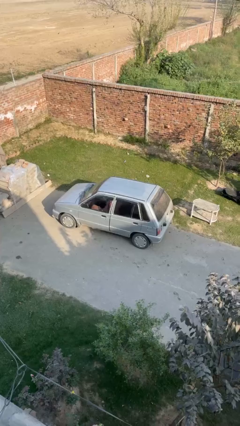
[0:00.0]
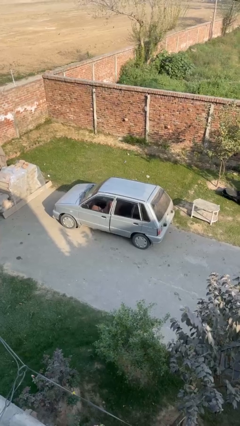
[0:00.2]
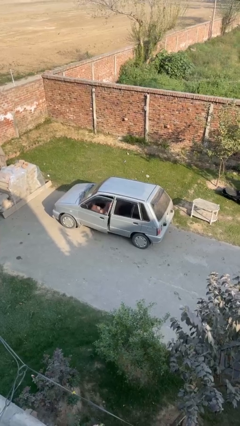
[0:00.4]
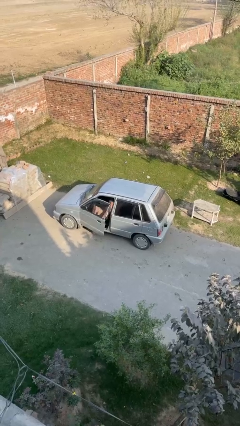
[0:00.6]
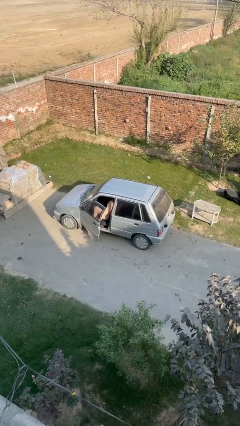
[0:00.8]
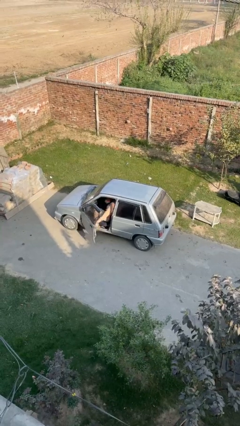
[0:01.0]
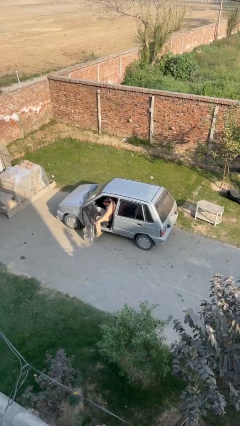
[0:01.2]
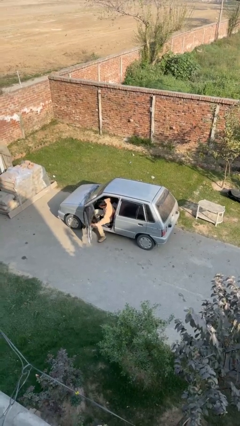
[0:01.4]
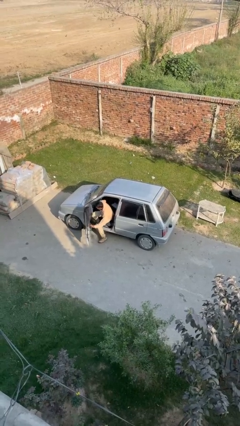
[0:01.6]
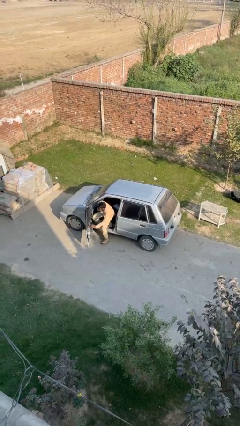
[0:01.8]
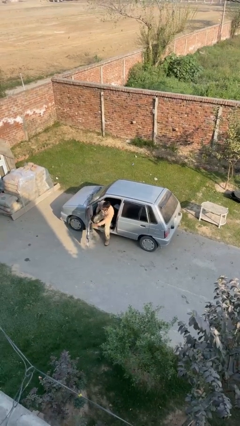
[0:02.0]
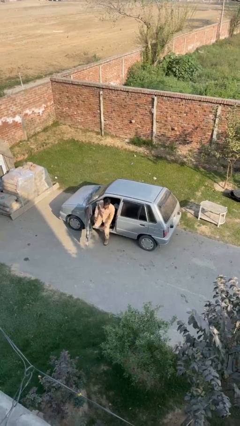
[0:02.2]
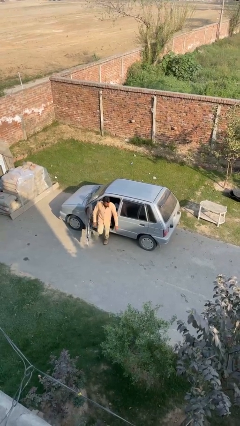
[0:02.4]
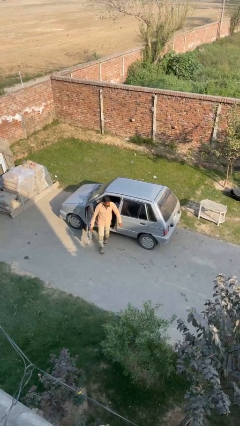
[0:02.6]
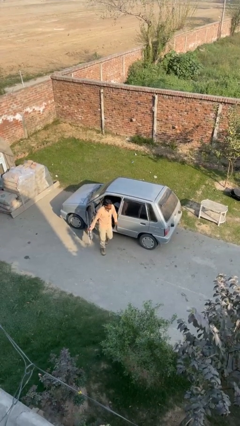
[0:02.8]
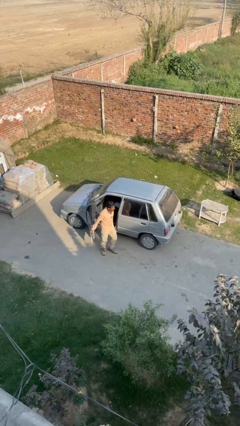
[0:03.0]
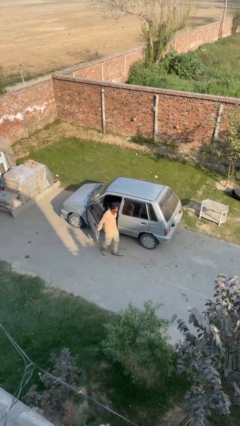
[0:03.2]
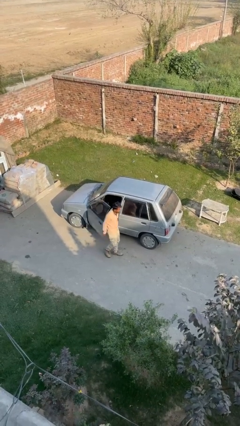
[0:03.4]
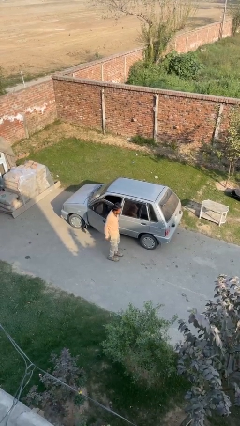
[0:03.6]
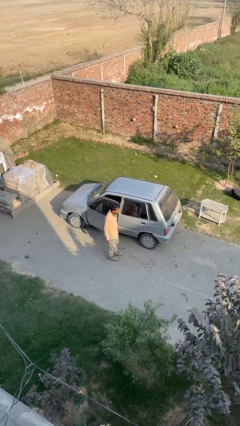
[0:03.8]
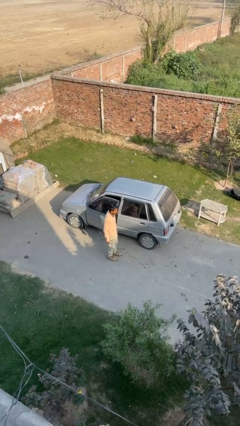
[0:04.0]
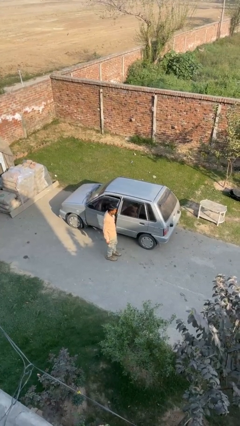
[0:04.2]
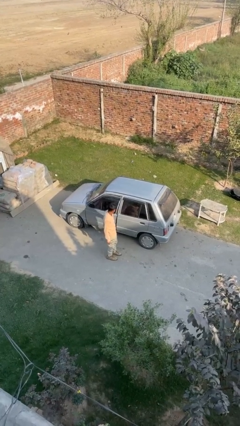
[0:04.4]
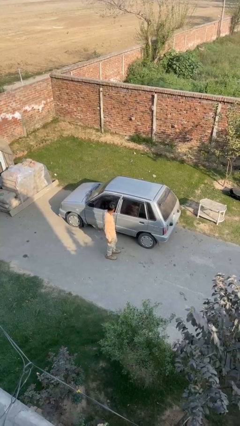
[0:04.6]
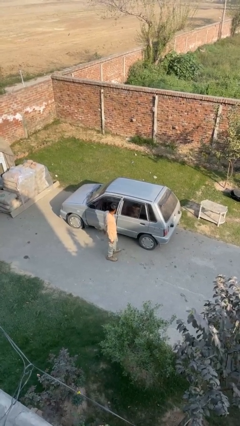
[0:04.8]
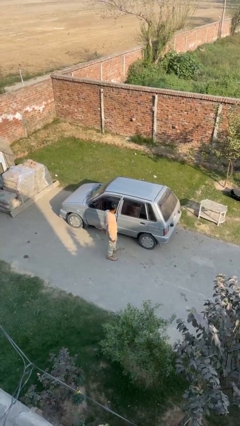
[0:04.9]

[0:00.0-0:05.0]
car drops off person

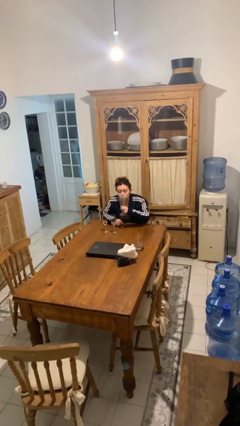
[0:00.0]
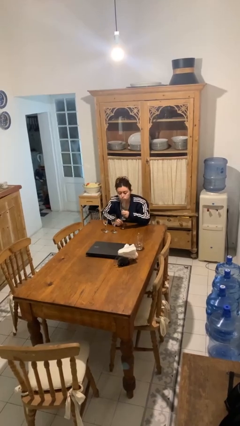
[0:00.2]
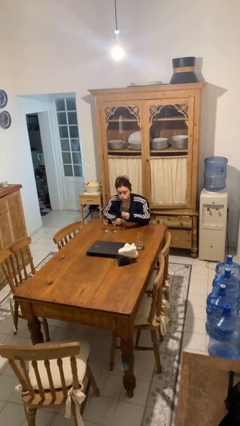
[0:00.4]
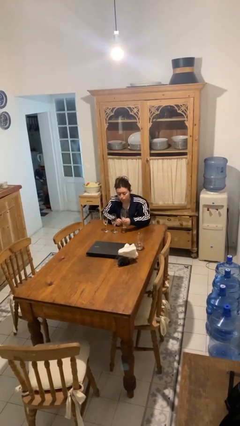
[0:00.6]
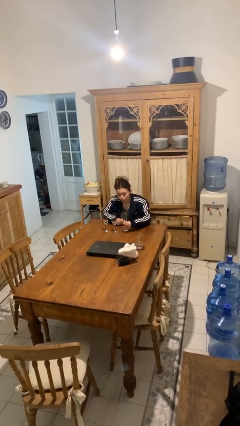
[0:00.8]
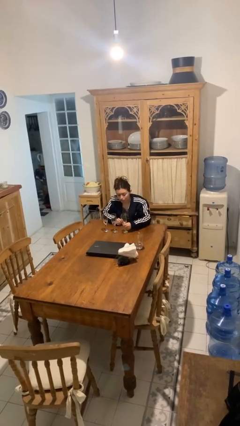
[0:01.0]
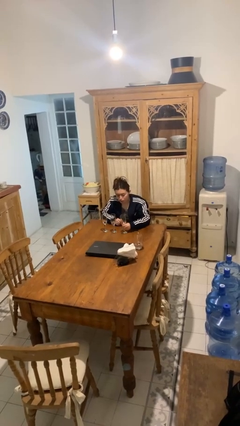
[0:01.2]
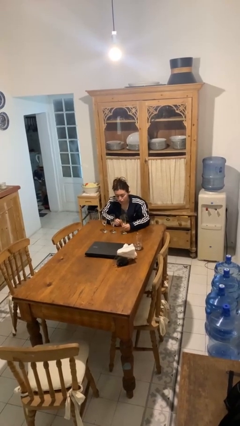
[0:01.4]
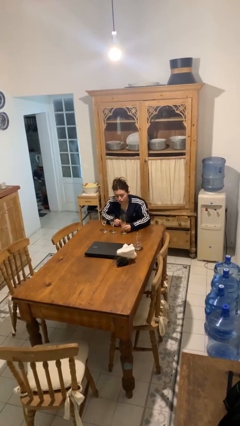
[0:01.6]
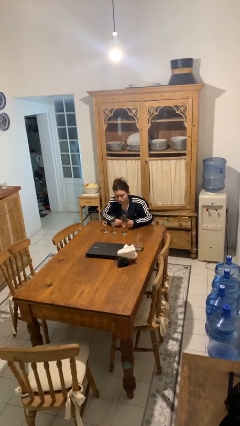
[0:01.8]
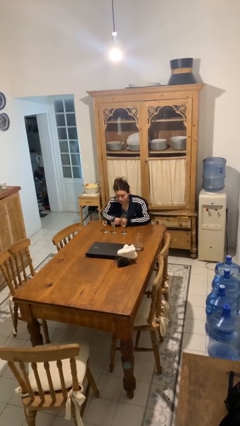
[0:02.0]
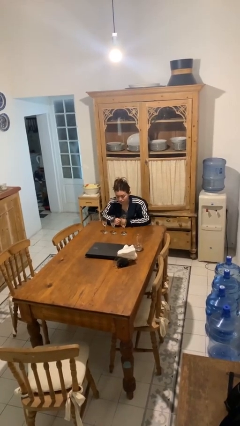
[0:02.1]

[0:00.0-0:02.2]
person puts down object on table

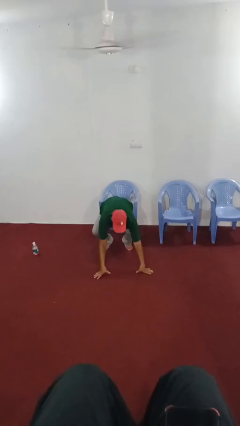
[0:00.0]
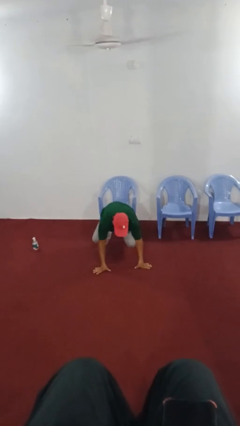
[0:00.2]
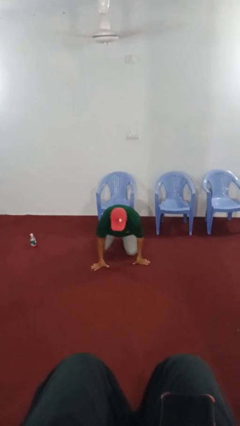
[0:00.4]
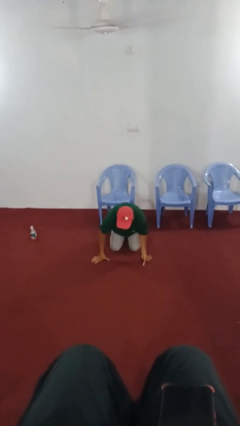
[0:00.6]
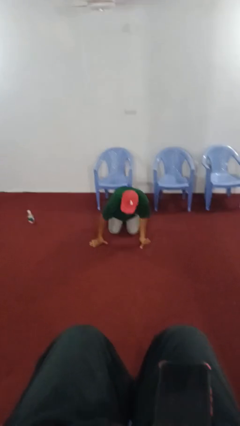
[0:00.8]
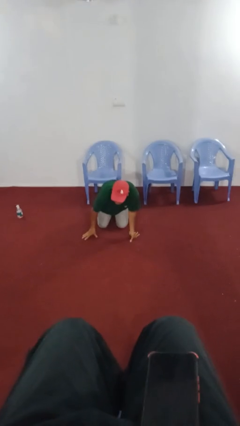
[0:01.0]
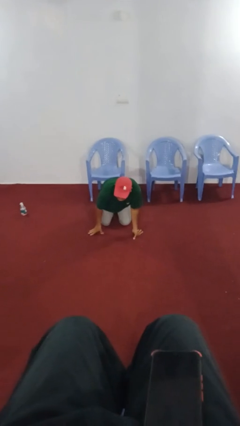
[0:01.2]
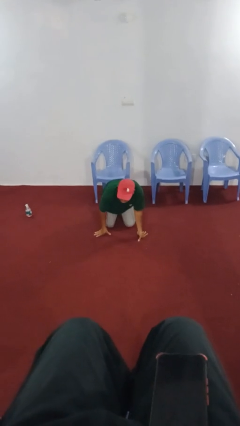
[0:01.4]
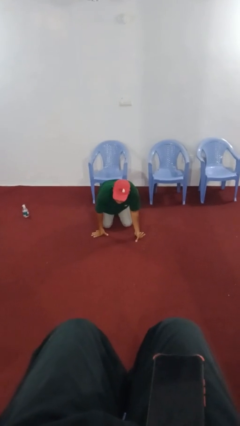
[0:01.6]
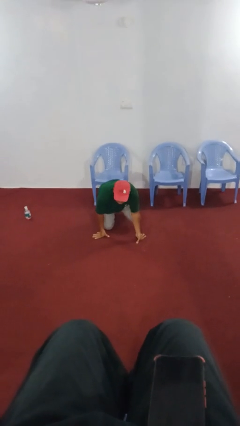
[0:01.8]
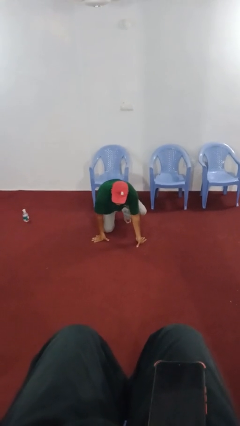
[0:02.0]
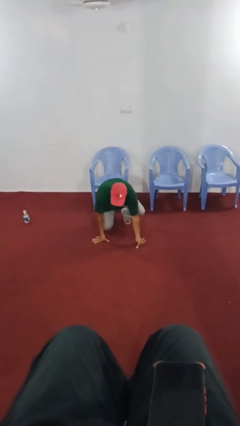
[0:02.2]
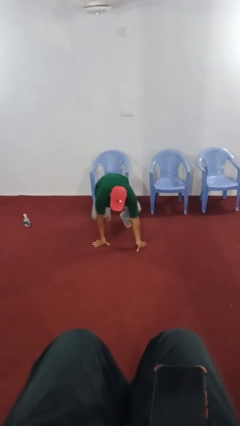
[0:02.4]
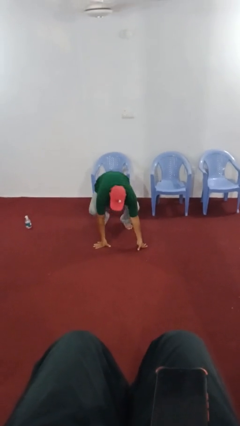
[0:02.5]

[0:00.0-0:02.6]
person falls from chair

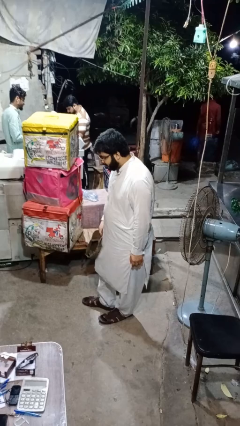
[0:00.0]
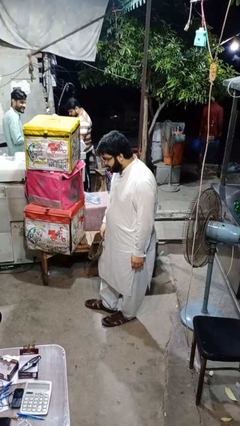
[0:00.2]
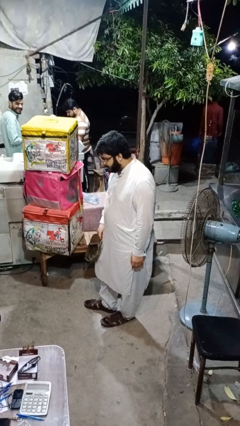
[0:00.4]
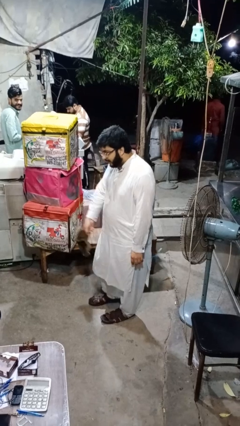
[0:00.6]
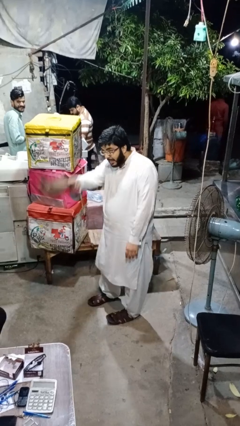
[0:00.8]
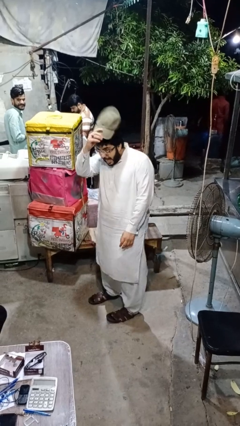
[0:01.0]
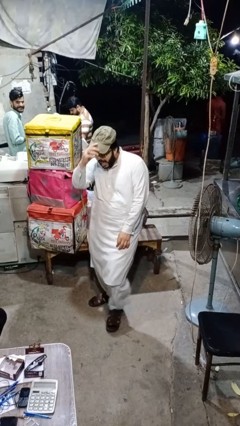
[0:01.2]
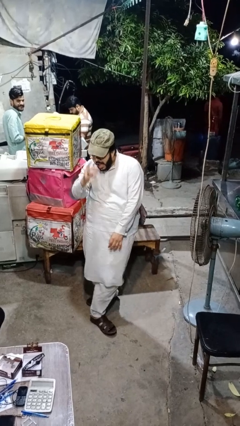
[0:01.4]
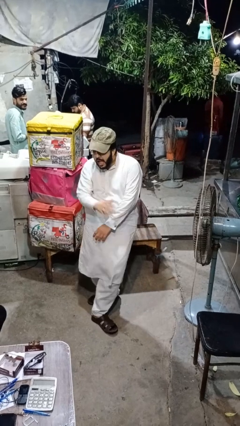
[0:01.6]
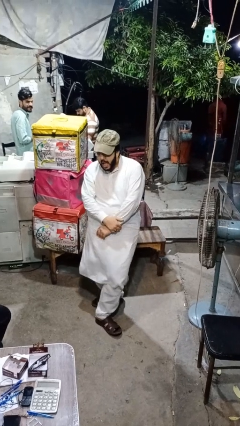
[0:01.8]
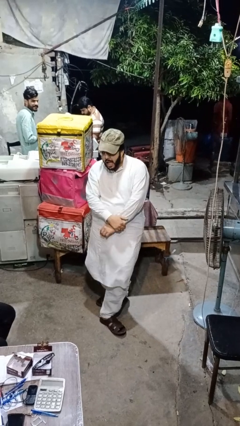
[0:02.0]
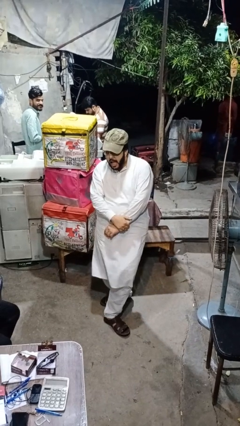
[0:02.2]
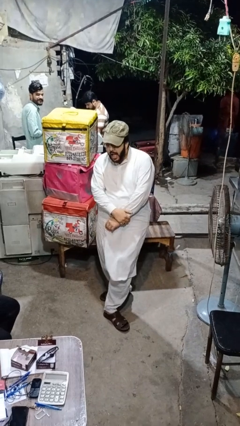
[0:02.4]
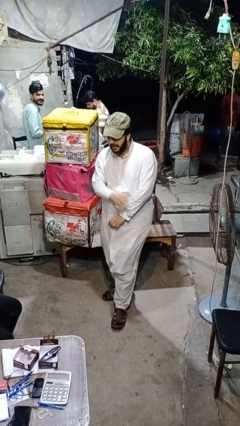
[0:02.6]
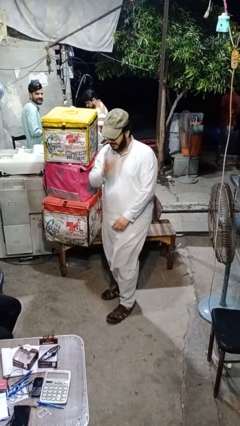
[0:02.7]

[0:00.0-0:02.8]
person puts on hat

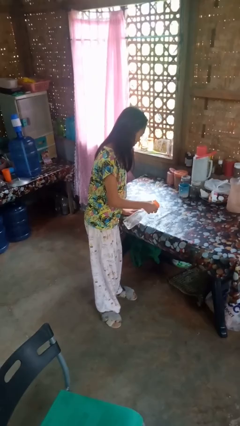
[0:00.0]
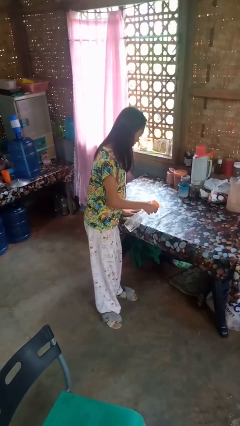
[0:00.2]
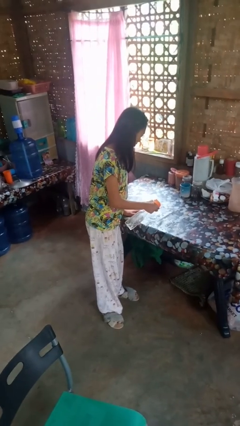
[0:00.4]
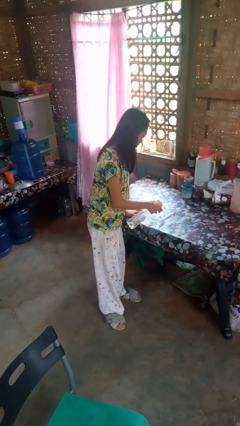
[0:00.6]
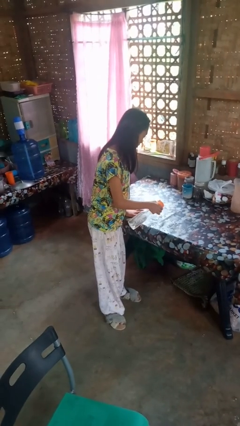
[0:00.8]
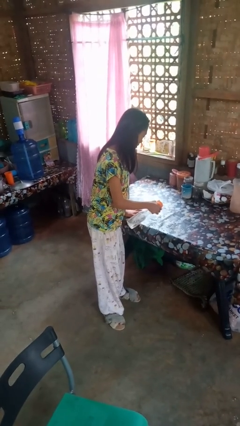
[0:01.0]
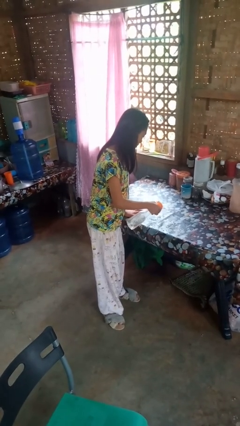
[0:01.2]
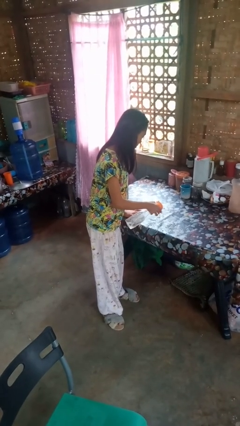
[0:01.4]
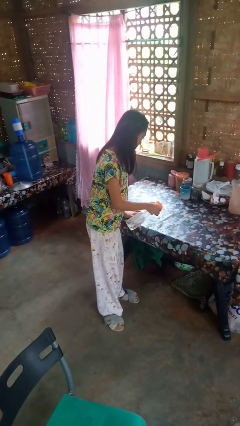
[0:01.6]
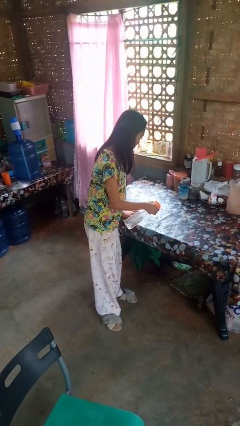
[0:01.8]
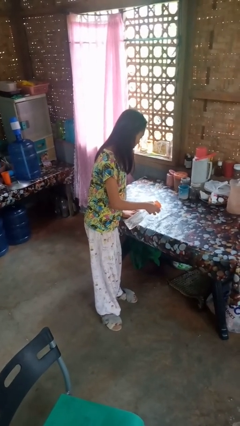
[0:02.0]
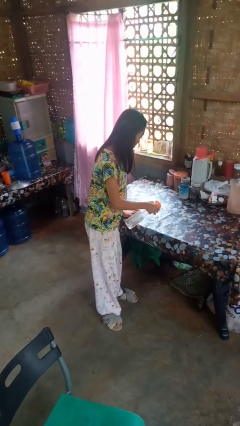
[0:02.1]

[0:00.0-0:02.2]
person sprays from bottle

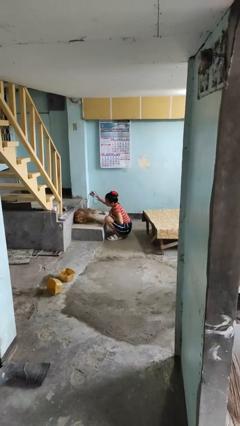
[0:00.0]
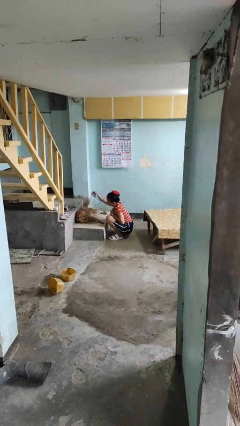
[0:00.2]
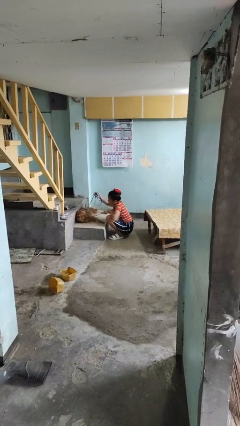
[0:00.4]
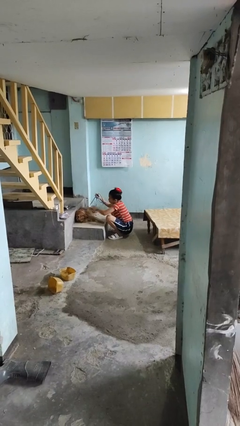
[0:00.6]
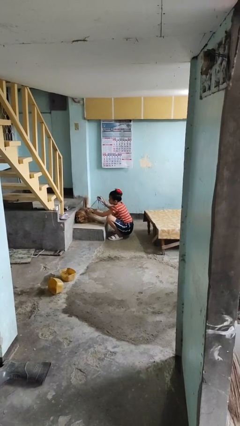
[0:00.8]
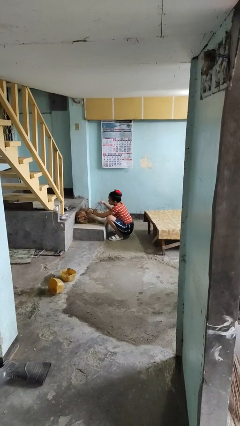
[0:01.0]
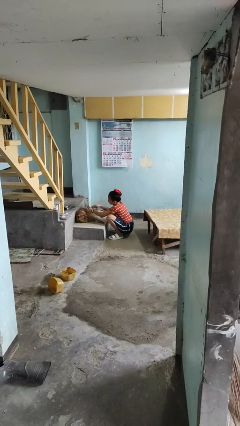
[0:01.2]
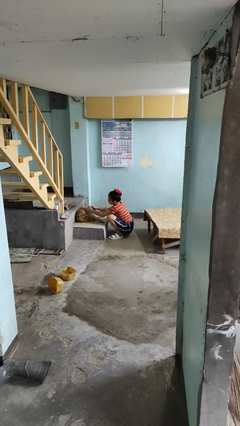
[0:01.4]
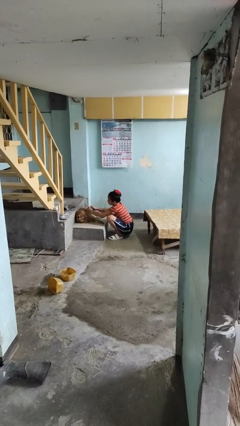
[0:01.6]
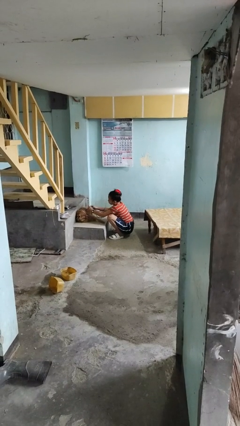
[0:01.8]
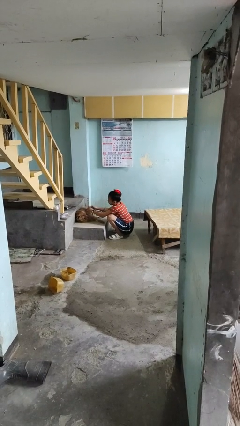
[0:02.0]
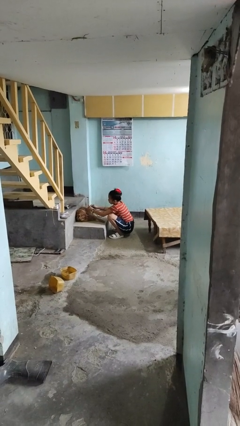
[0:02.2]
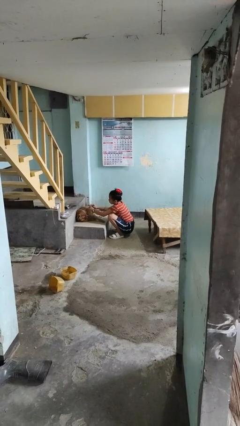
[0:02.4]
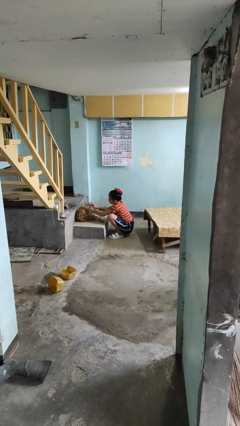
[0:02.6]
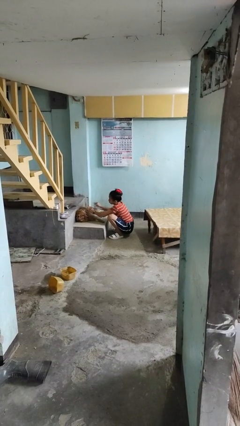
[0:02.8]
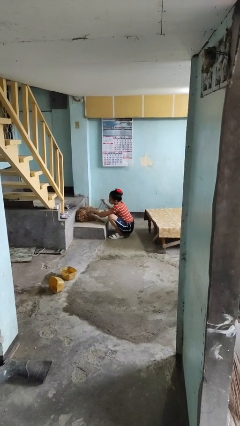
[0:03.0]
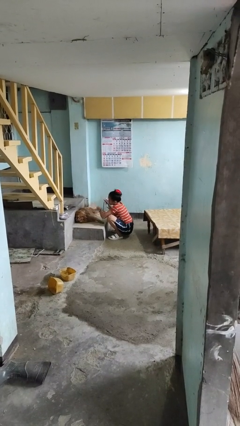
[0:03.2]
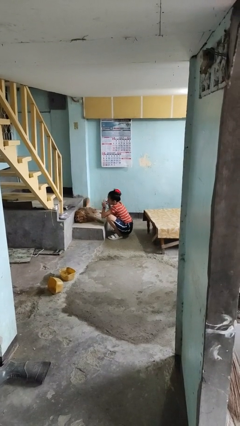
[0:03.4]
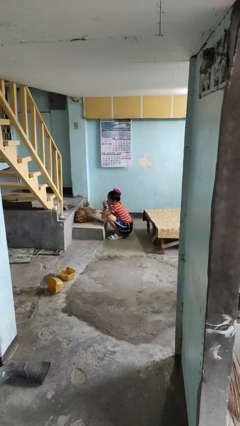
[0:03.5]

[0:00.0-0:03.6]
person unattaches leash from dog
